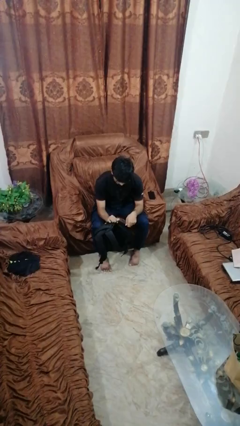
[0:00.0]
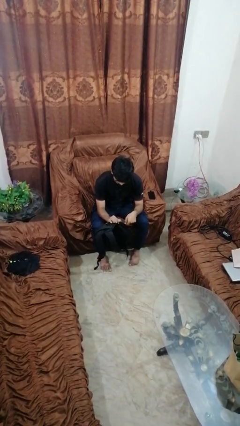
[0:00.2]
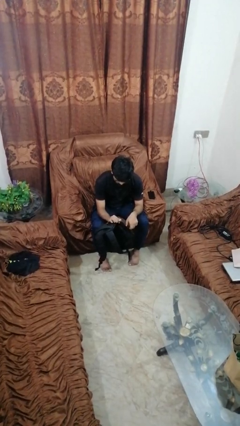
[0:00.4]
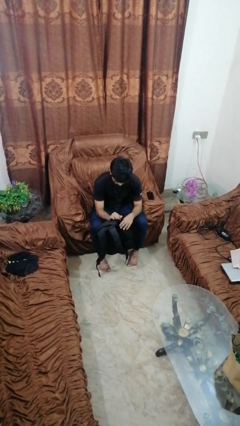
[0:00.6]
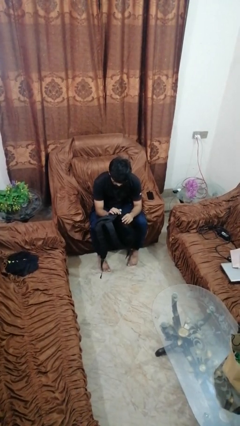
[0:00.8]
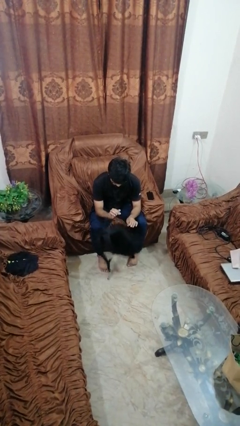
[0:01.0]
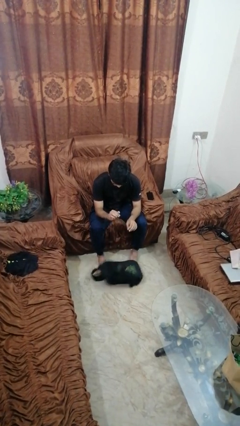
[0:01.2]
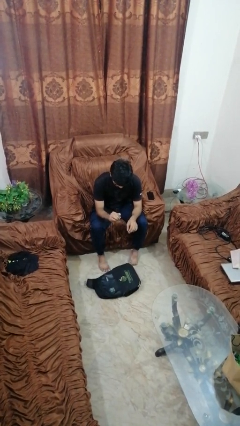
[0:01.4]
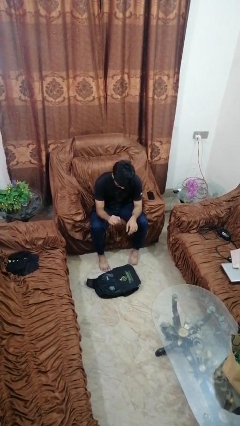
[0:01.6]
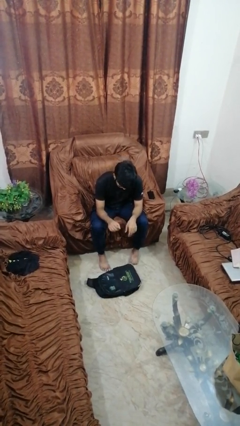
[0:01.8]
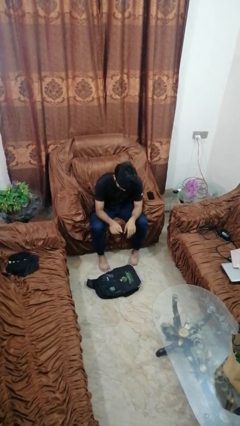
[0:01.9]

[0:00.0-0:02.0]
person drops object

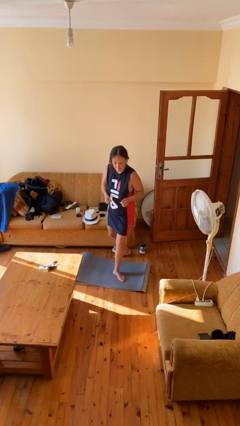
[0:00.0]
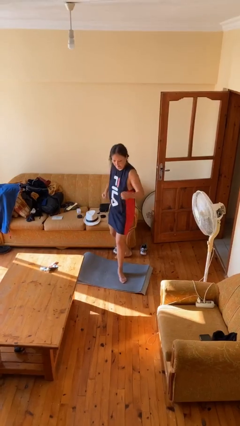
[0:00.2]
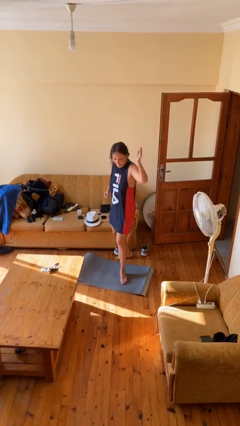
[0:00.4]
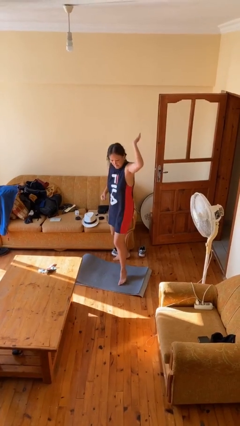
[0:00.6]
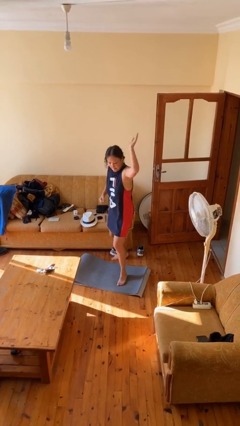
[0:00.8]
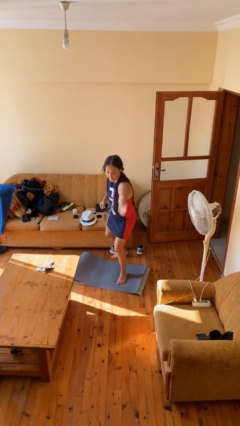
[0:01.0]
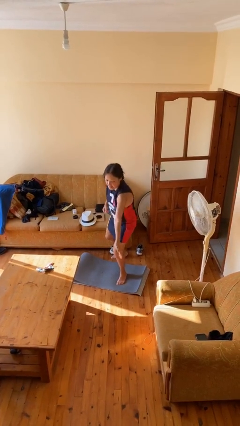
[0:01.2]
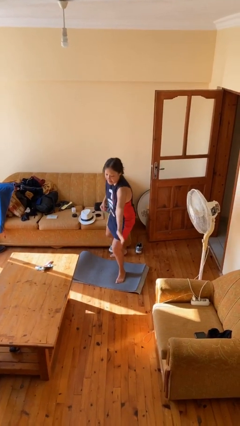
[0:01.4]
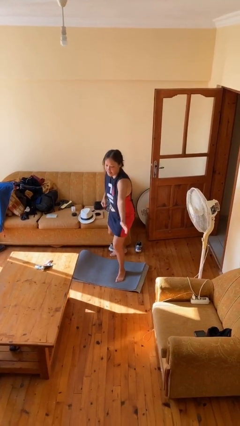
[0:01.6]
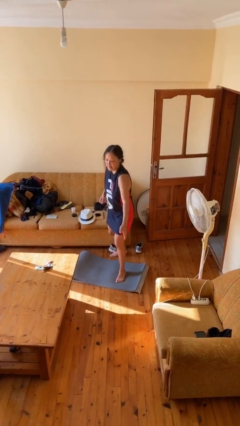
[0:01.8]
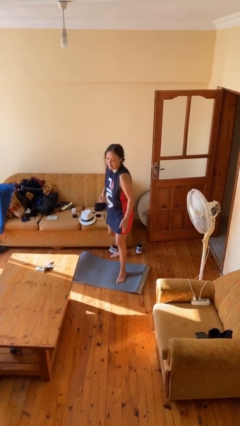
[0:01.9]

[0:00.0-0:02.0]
person karate chop

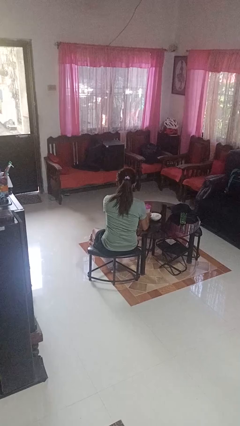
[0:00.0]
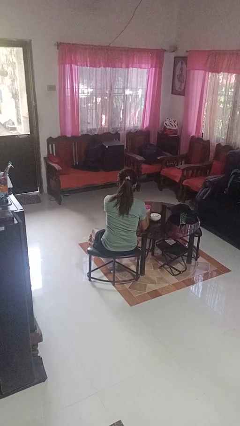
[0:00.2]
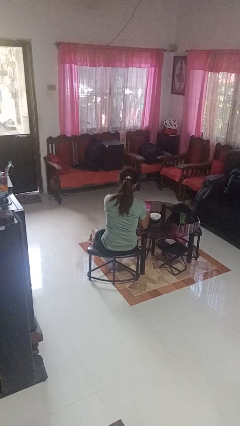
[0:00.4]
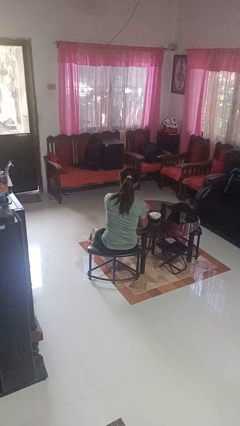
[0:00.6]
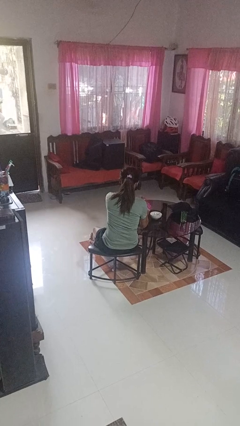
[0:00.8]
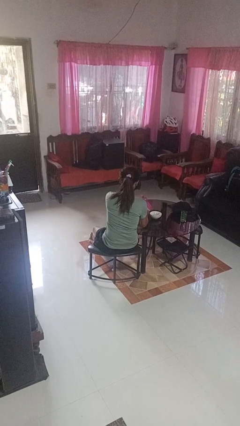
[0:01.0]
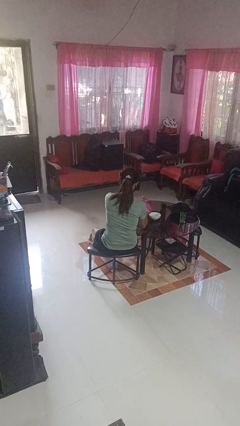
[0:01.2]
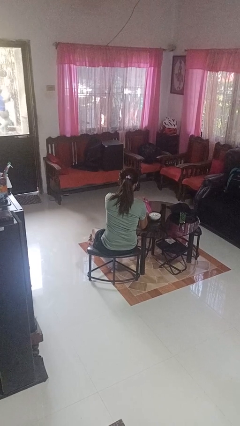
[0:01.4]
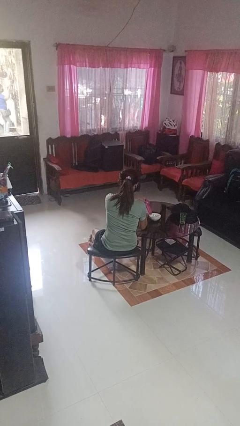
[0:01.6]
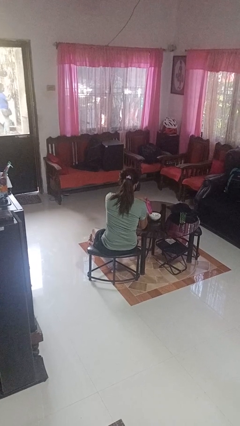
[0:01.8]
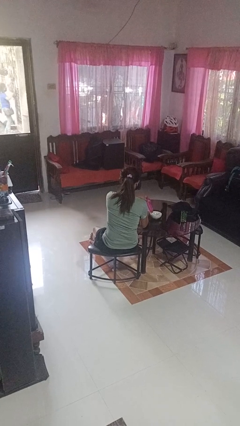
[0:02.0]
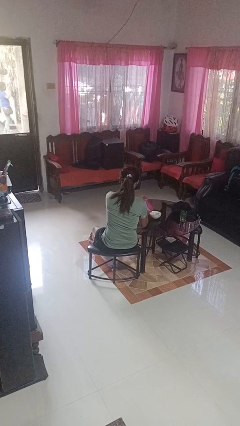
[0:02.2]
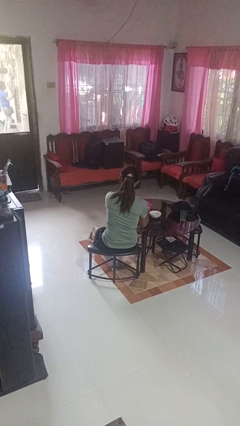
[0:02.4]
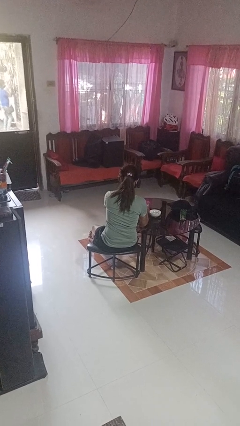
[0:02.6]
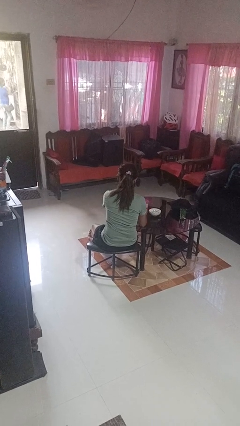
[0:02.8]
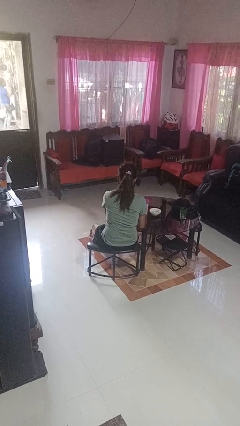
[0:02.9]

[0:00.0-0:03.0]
person pours into bowl

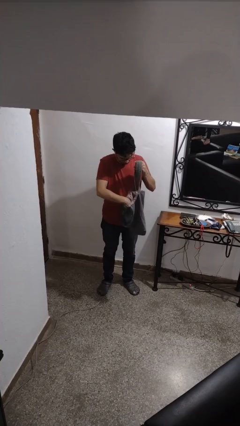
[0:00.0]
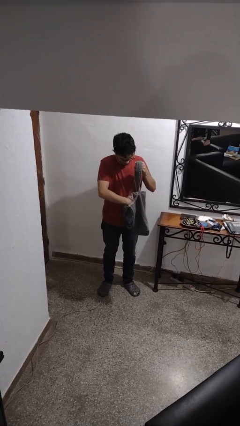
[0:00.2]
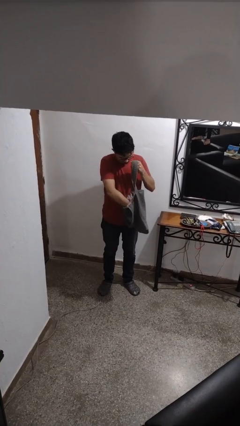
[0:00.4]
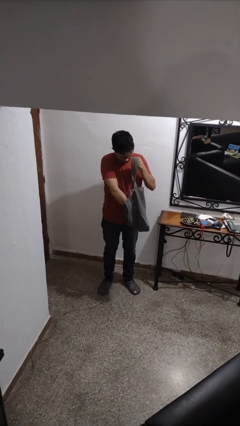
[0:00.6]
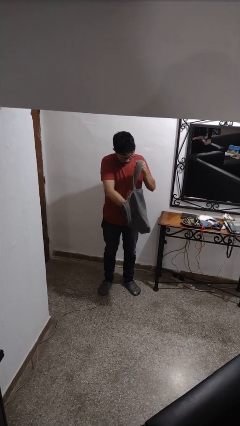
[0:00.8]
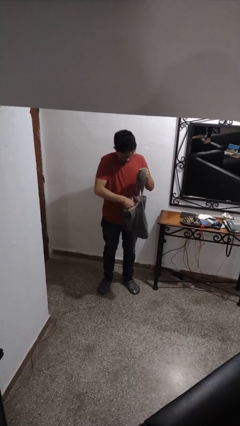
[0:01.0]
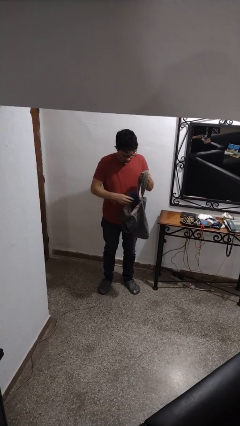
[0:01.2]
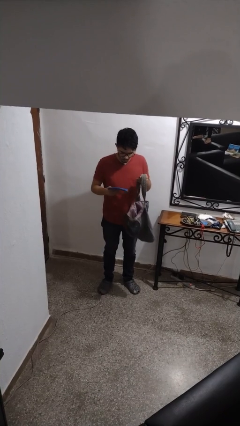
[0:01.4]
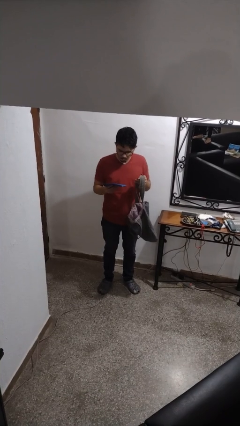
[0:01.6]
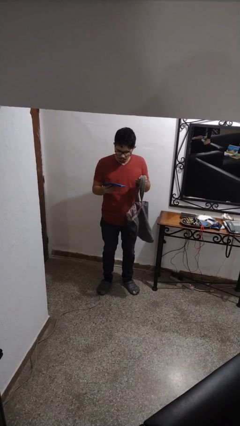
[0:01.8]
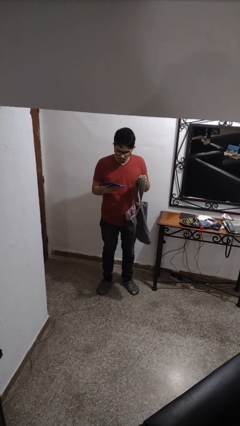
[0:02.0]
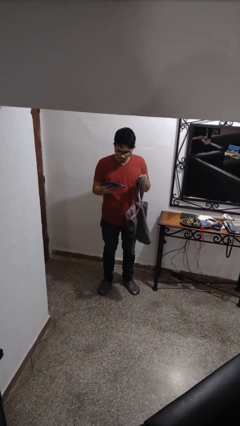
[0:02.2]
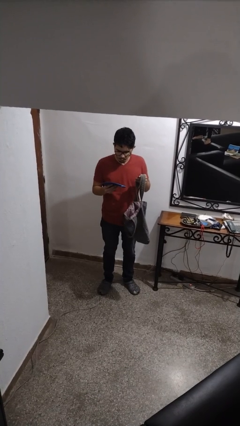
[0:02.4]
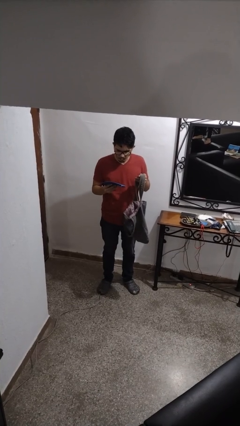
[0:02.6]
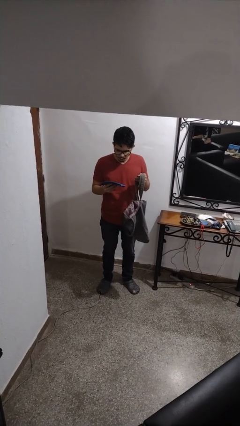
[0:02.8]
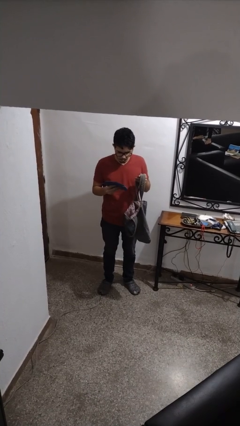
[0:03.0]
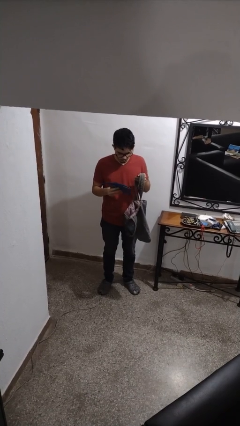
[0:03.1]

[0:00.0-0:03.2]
person takes object from purse

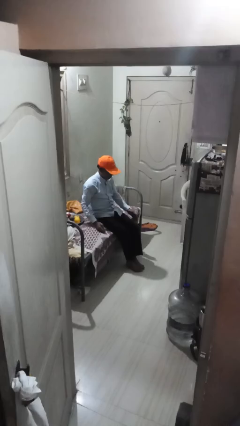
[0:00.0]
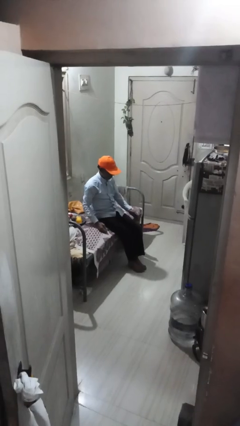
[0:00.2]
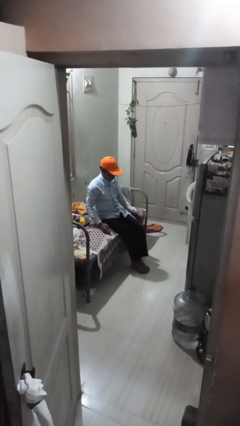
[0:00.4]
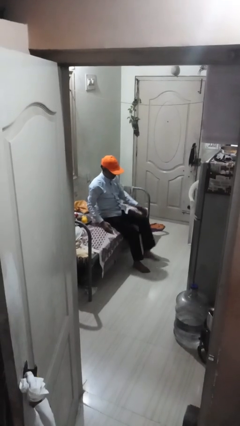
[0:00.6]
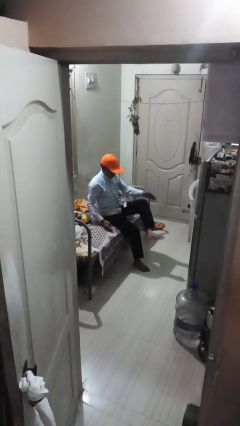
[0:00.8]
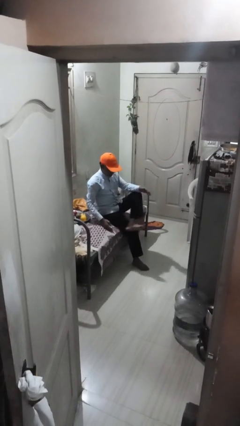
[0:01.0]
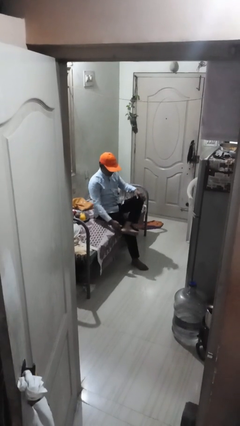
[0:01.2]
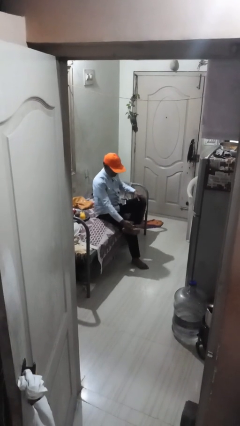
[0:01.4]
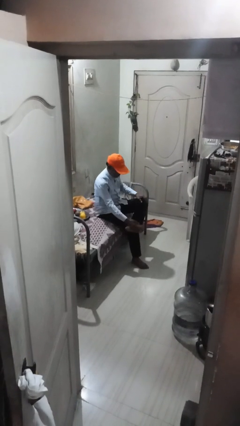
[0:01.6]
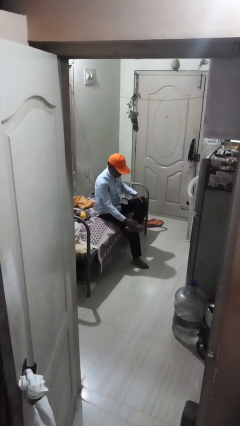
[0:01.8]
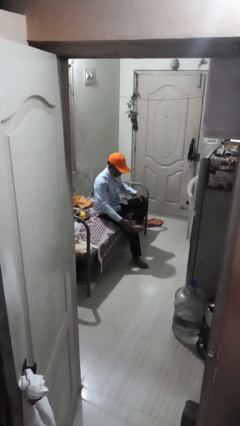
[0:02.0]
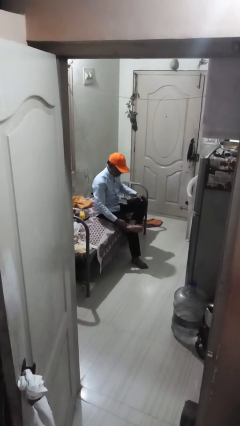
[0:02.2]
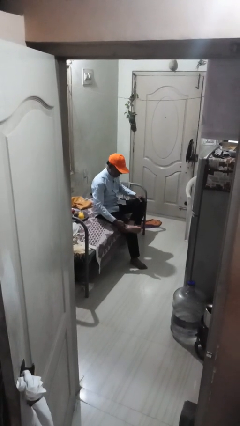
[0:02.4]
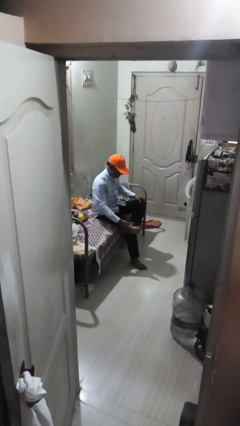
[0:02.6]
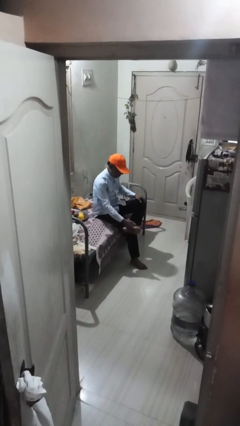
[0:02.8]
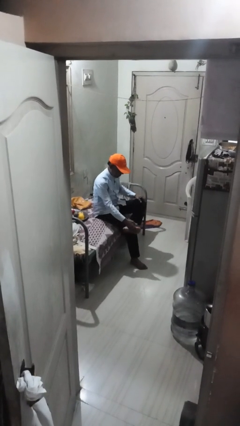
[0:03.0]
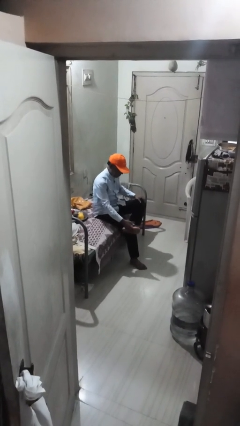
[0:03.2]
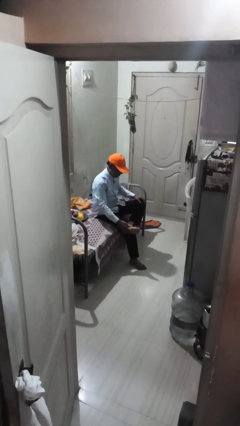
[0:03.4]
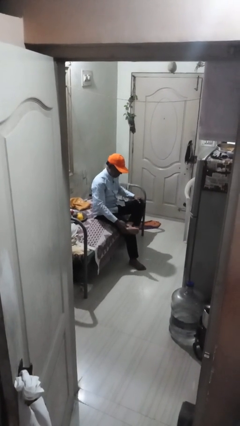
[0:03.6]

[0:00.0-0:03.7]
person rubs foot

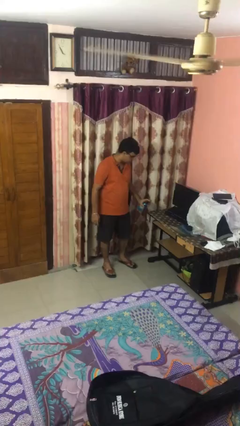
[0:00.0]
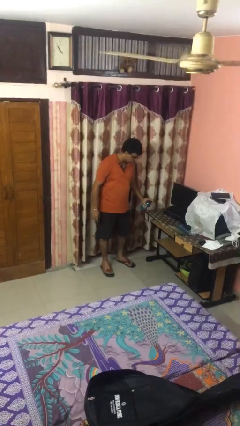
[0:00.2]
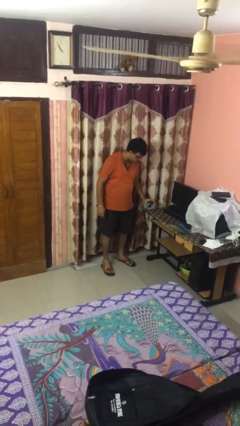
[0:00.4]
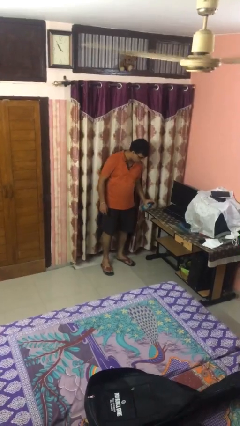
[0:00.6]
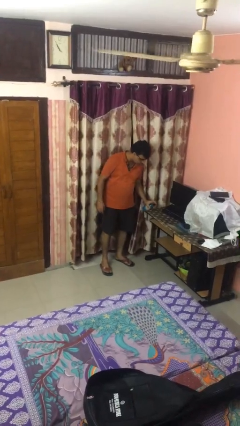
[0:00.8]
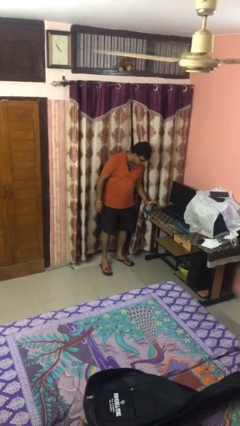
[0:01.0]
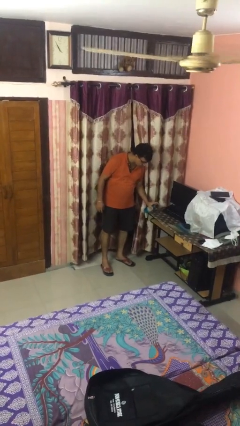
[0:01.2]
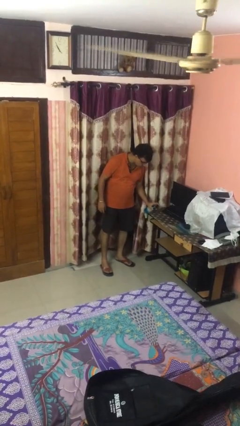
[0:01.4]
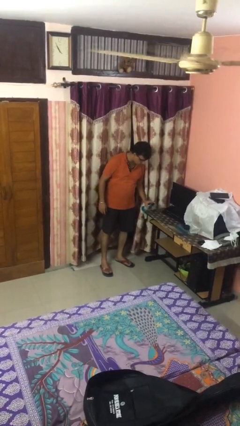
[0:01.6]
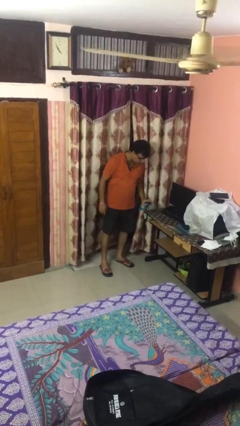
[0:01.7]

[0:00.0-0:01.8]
person sprays from bottle

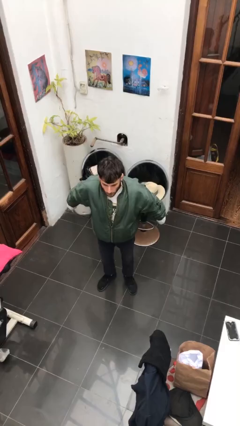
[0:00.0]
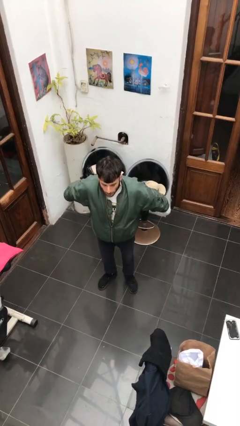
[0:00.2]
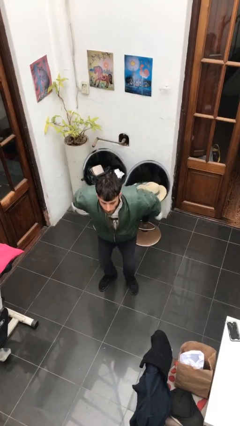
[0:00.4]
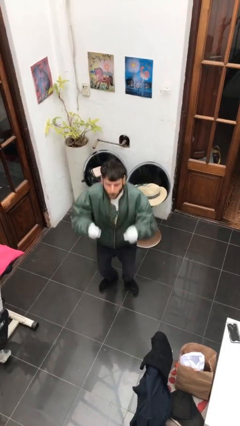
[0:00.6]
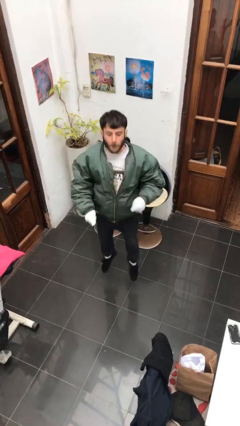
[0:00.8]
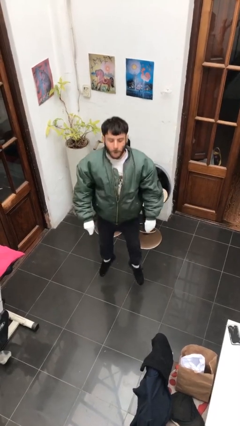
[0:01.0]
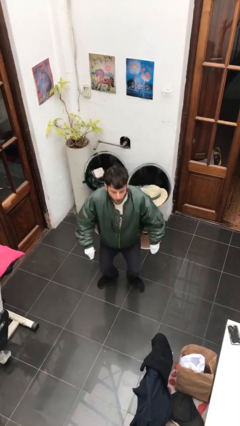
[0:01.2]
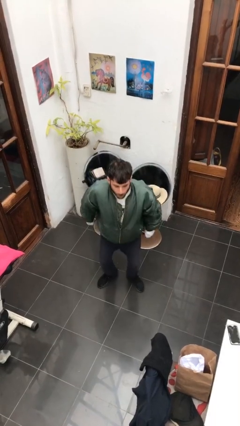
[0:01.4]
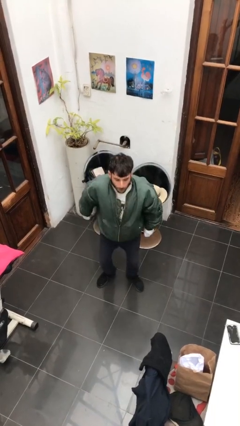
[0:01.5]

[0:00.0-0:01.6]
person jumps

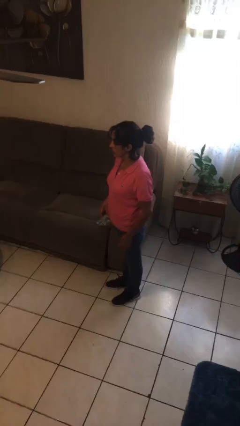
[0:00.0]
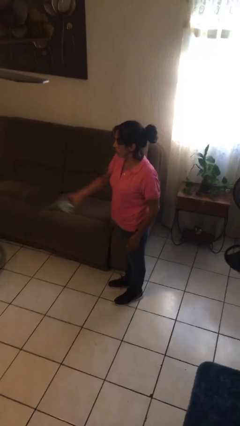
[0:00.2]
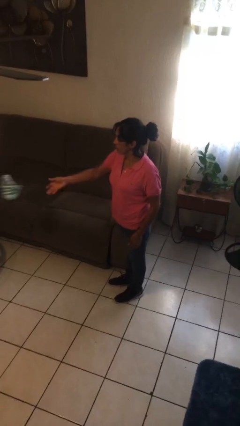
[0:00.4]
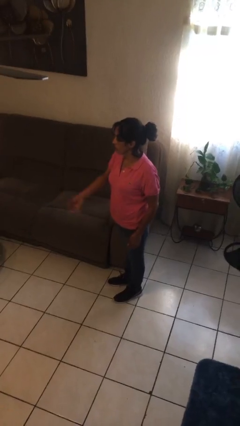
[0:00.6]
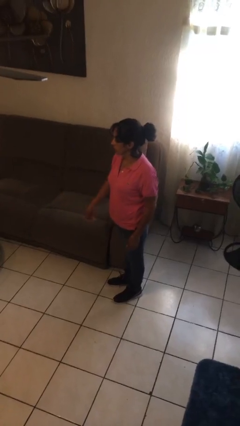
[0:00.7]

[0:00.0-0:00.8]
person throws object on table
